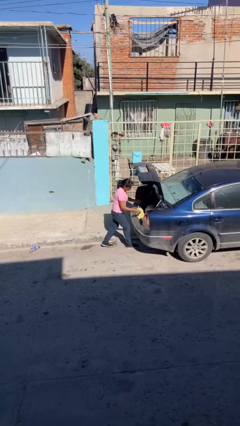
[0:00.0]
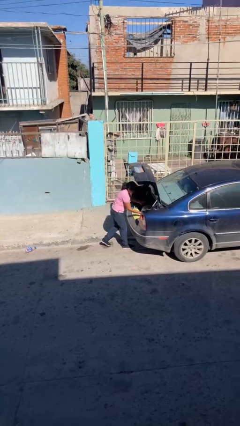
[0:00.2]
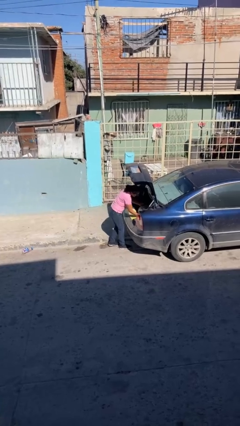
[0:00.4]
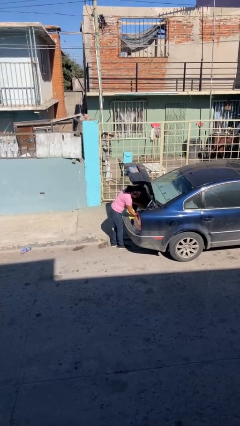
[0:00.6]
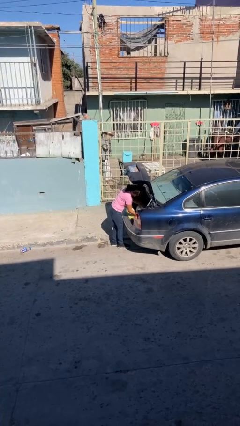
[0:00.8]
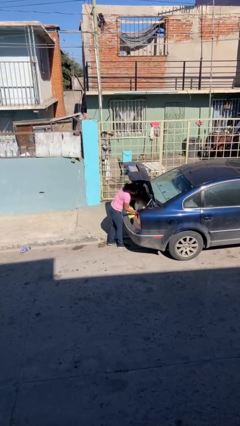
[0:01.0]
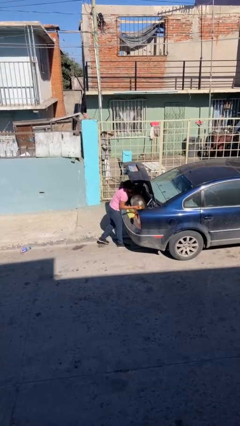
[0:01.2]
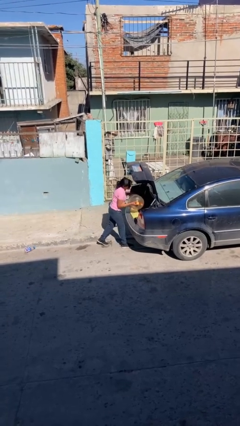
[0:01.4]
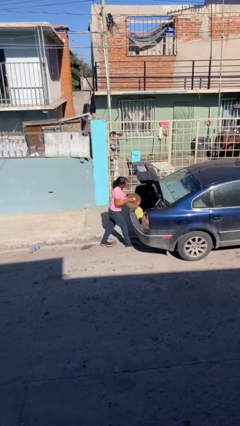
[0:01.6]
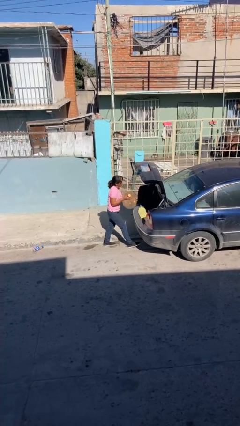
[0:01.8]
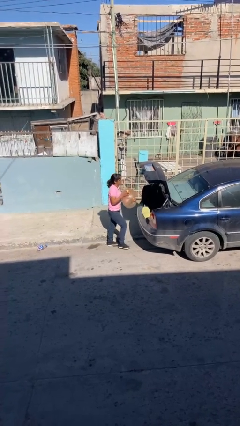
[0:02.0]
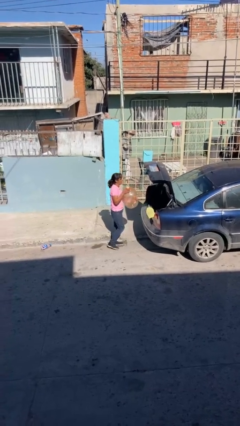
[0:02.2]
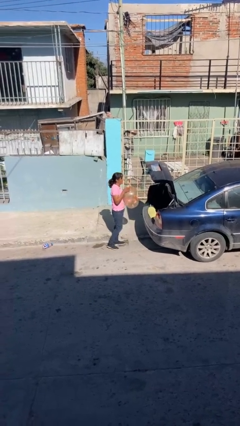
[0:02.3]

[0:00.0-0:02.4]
person unloads car

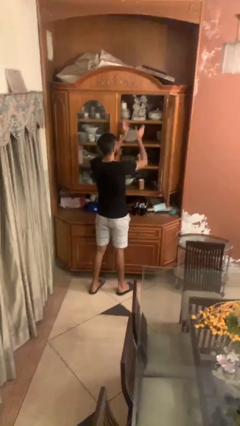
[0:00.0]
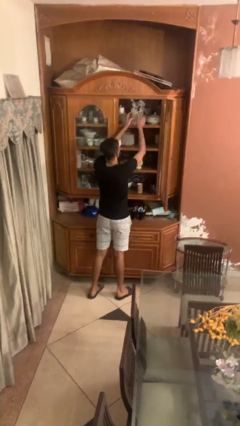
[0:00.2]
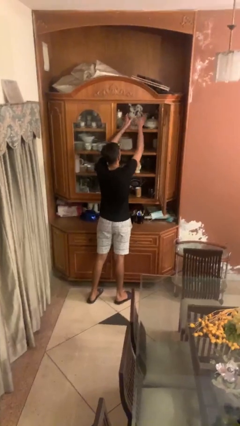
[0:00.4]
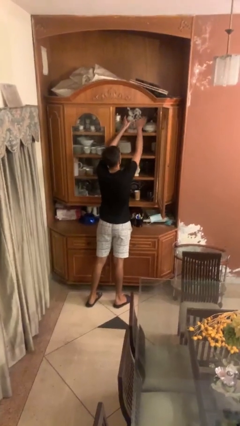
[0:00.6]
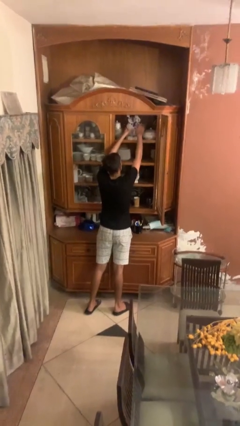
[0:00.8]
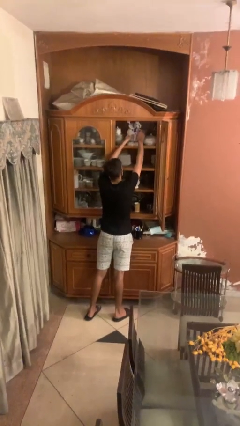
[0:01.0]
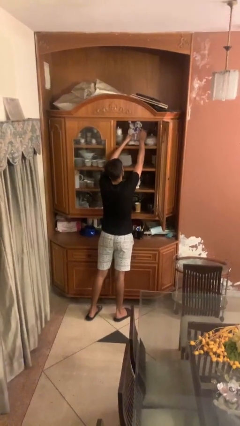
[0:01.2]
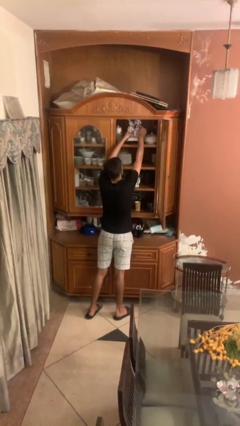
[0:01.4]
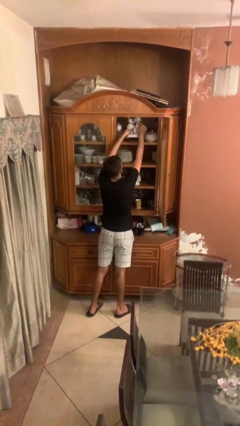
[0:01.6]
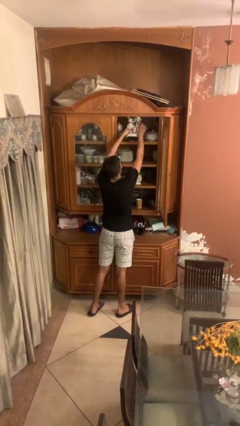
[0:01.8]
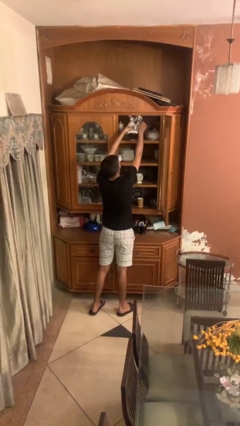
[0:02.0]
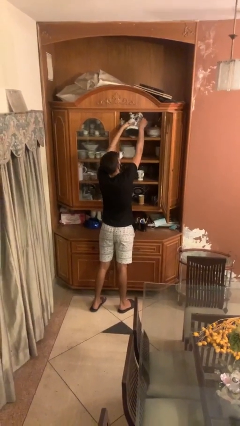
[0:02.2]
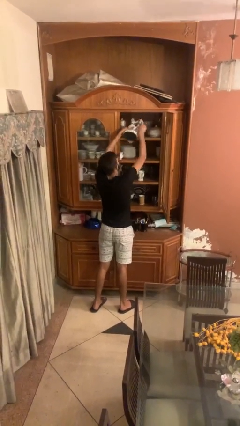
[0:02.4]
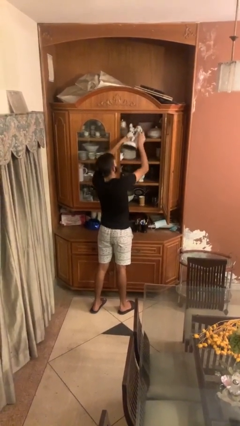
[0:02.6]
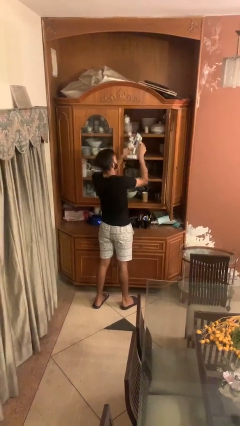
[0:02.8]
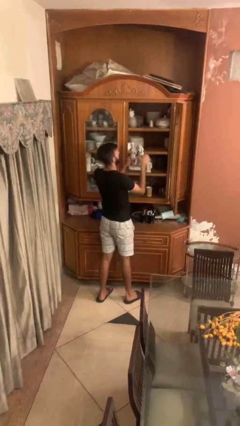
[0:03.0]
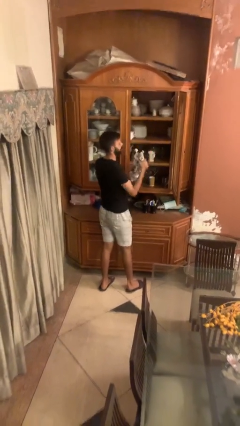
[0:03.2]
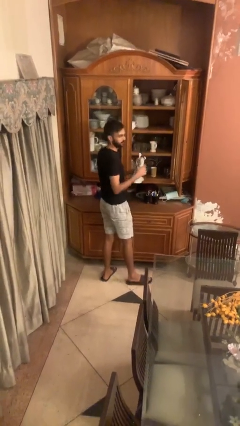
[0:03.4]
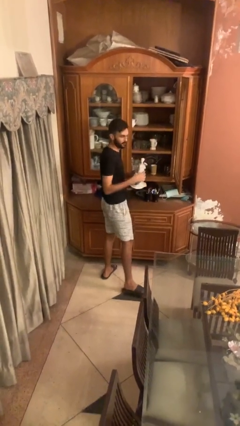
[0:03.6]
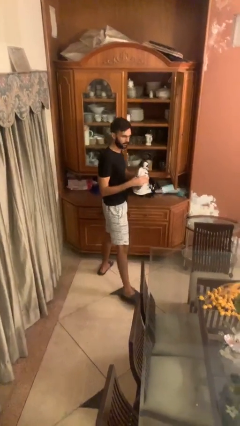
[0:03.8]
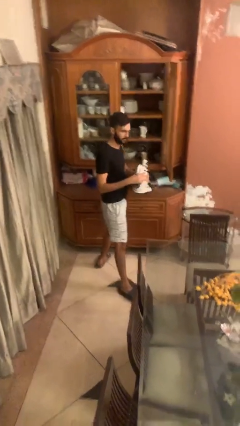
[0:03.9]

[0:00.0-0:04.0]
person picks up object from shelf

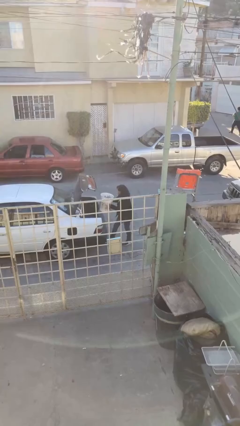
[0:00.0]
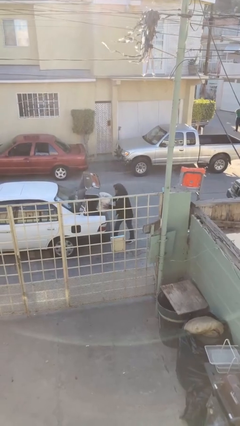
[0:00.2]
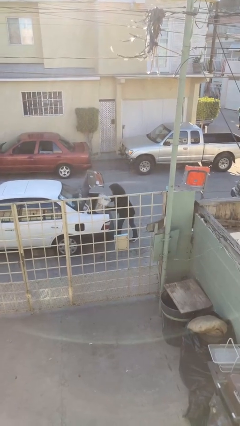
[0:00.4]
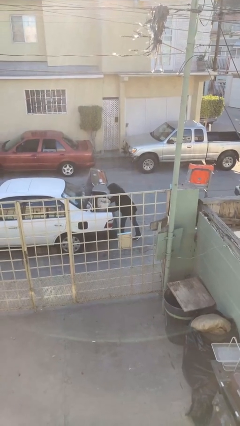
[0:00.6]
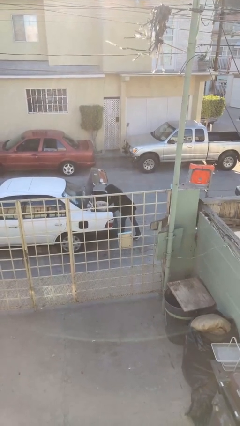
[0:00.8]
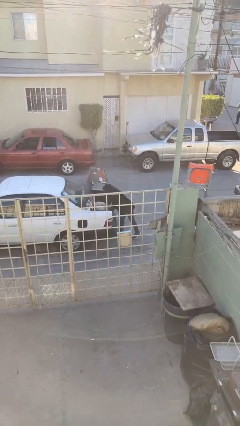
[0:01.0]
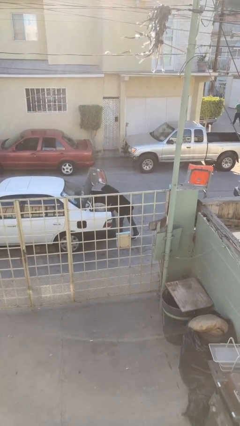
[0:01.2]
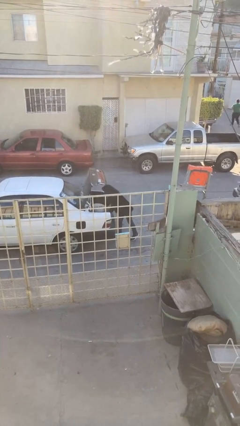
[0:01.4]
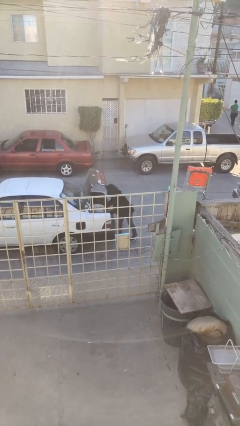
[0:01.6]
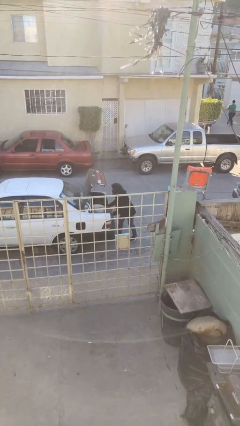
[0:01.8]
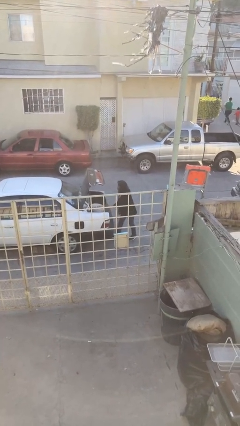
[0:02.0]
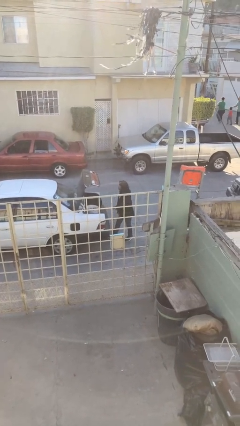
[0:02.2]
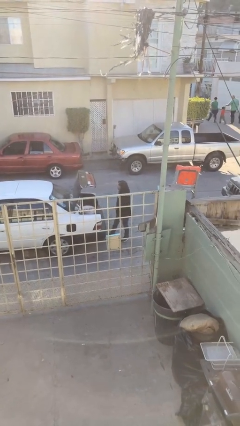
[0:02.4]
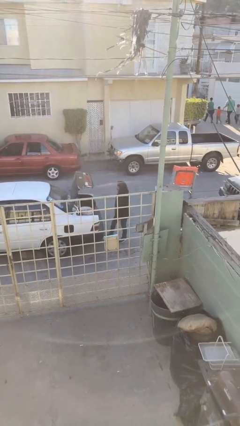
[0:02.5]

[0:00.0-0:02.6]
person loads car

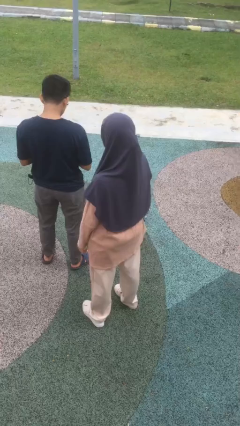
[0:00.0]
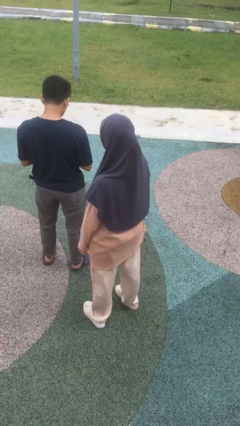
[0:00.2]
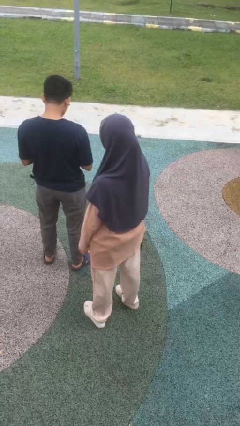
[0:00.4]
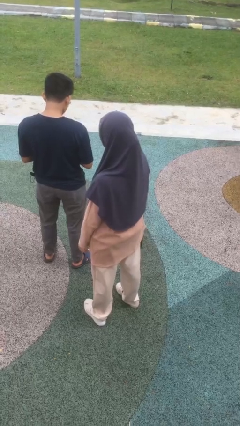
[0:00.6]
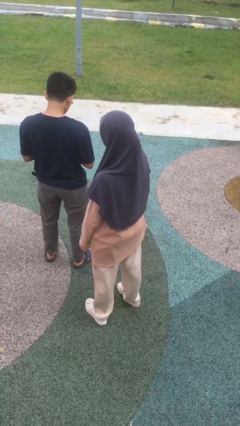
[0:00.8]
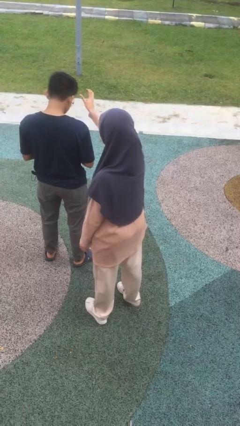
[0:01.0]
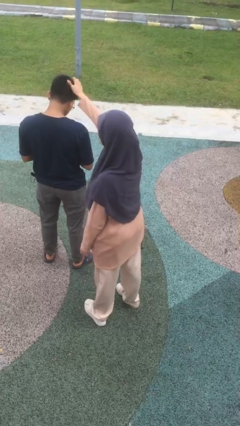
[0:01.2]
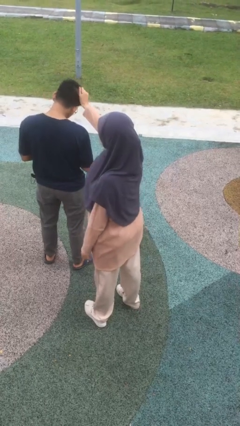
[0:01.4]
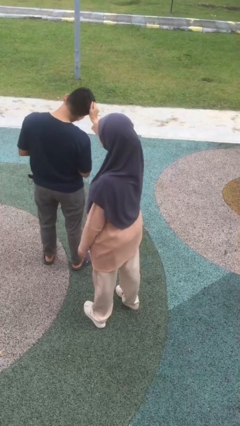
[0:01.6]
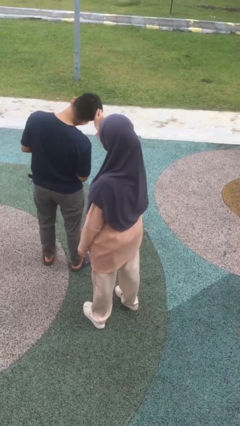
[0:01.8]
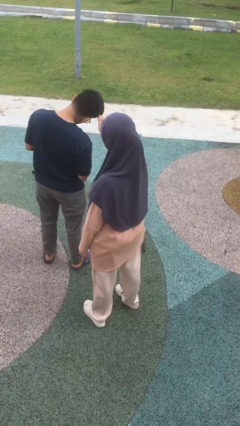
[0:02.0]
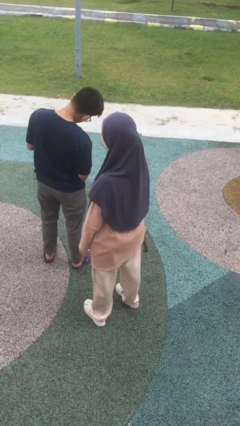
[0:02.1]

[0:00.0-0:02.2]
person grabs person by hair

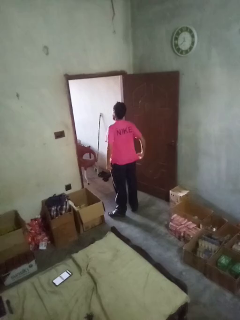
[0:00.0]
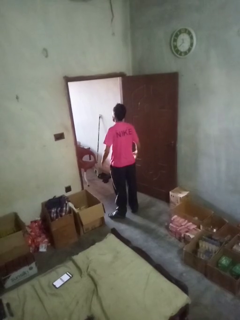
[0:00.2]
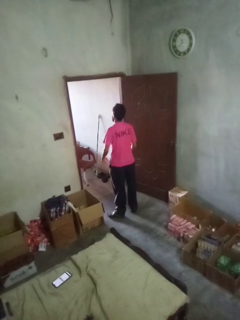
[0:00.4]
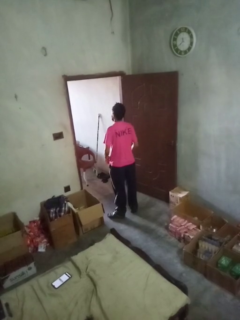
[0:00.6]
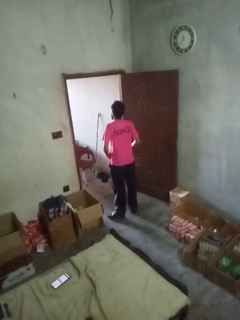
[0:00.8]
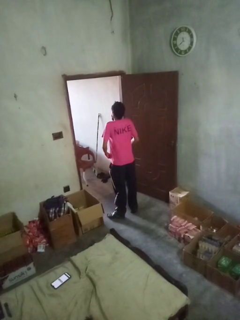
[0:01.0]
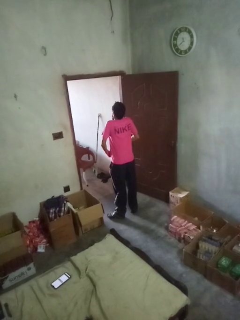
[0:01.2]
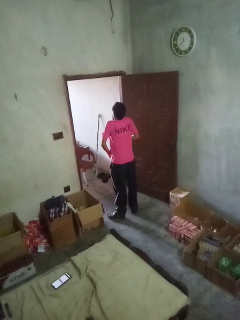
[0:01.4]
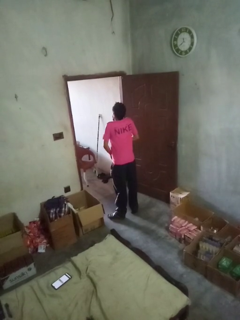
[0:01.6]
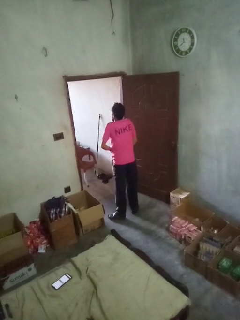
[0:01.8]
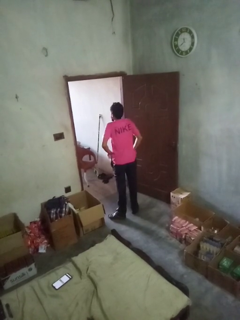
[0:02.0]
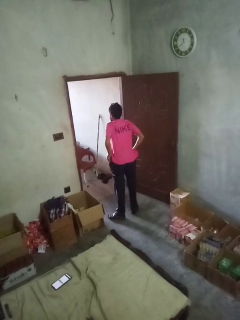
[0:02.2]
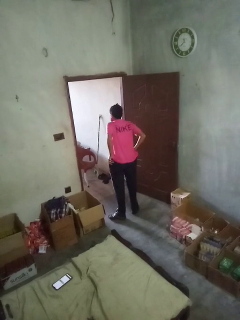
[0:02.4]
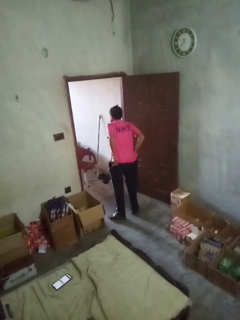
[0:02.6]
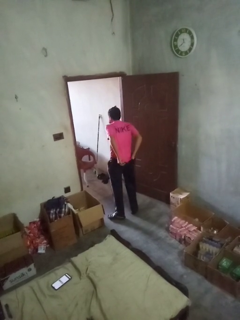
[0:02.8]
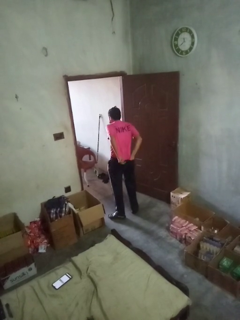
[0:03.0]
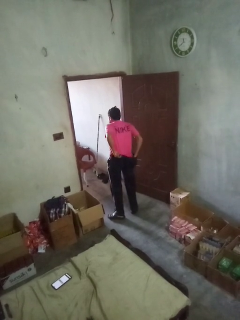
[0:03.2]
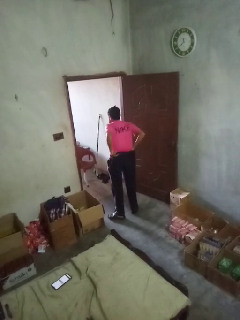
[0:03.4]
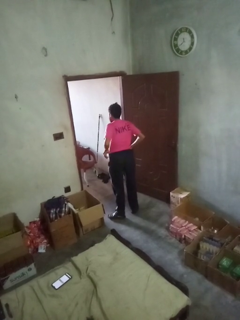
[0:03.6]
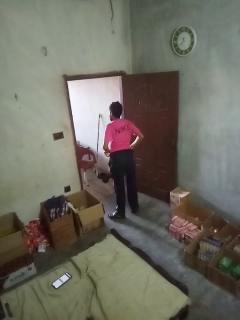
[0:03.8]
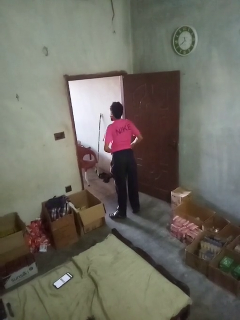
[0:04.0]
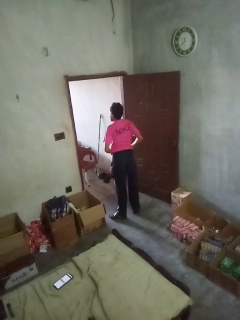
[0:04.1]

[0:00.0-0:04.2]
person tucks in shirt

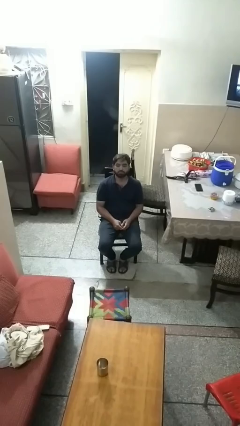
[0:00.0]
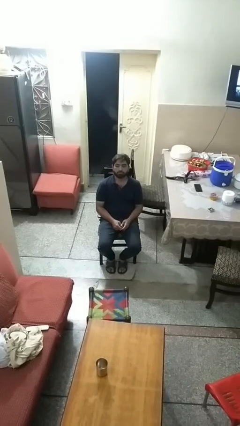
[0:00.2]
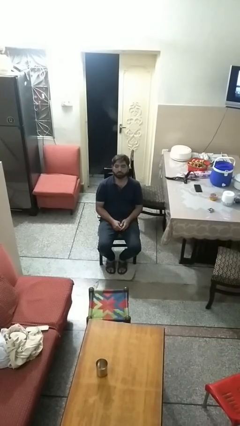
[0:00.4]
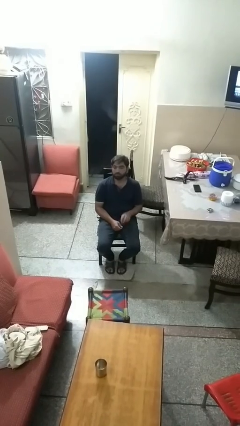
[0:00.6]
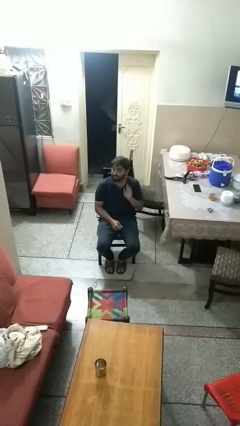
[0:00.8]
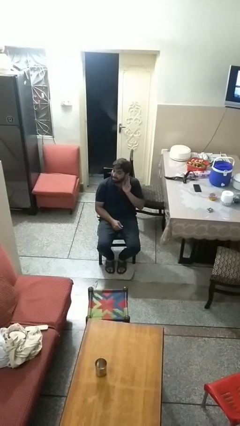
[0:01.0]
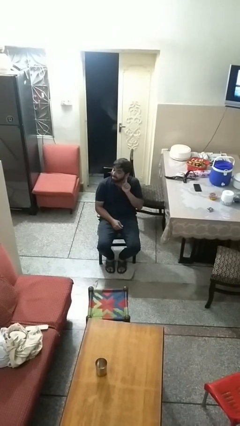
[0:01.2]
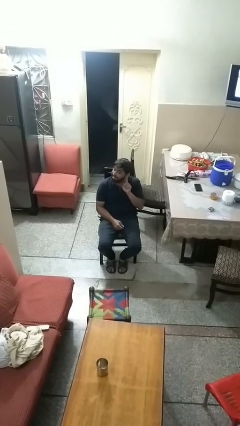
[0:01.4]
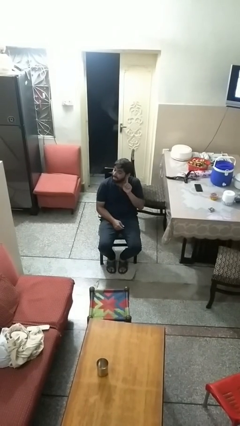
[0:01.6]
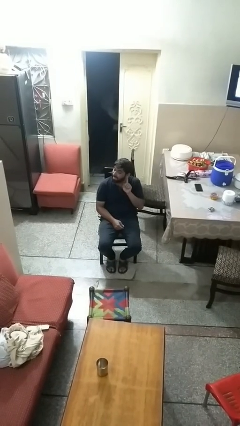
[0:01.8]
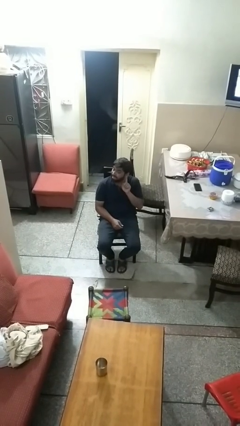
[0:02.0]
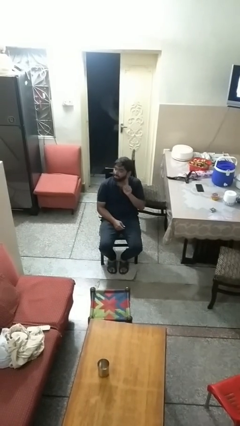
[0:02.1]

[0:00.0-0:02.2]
person gestures listen closely

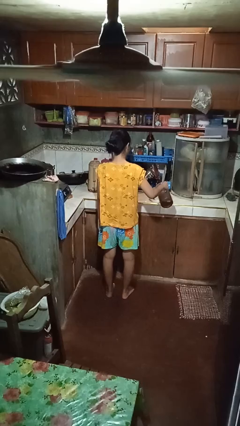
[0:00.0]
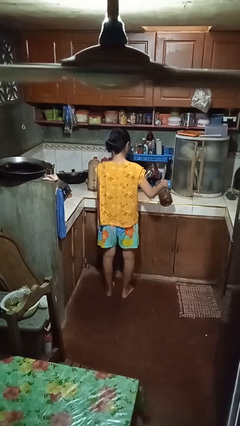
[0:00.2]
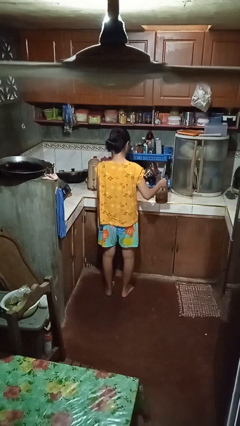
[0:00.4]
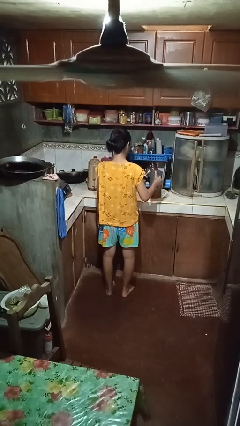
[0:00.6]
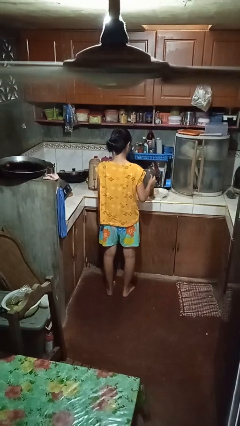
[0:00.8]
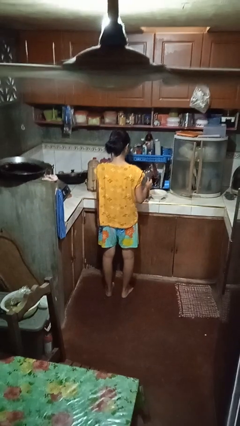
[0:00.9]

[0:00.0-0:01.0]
person pours into bowl
